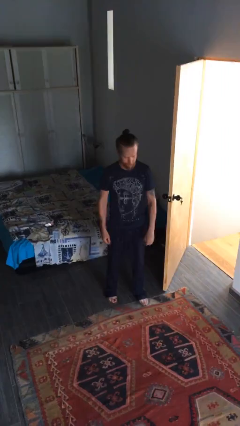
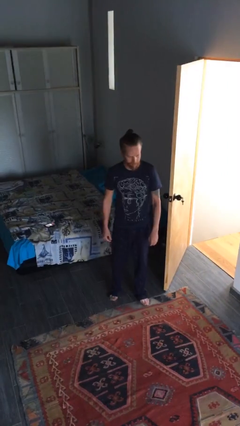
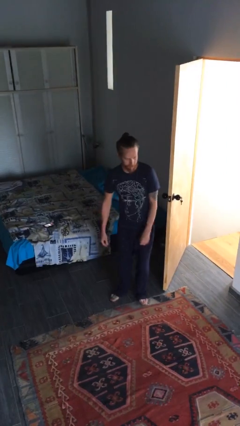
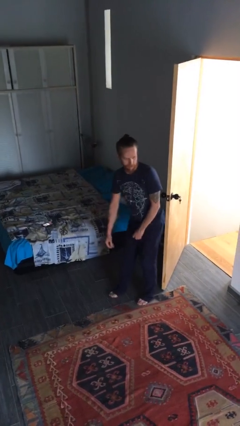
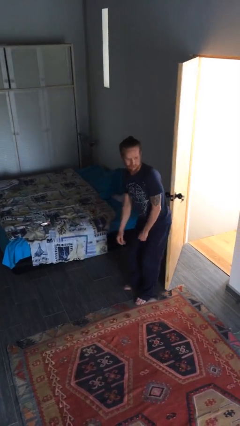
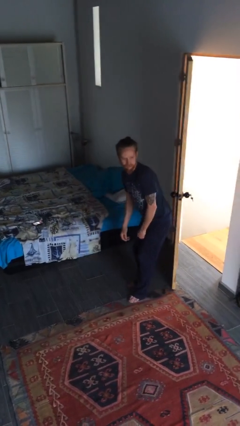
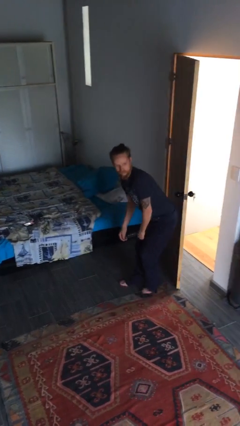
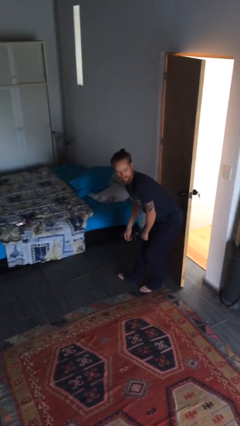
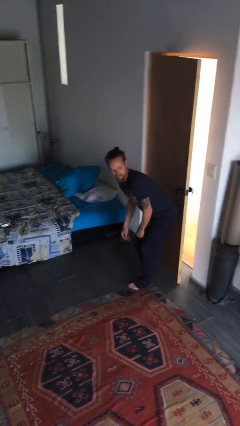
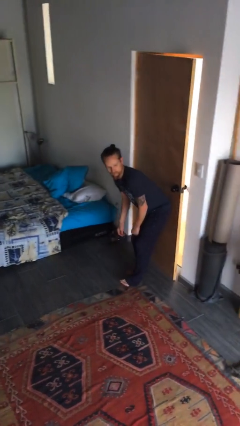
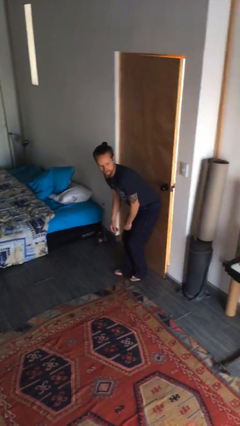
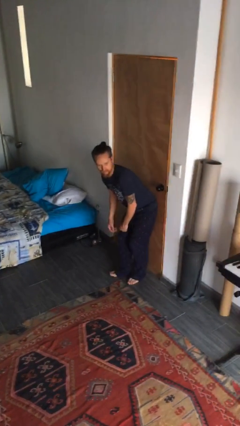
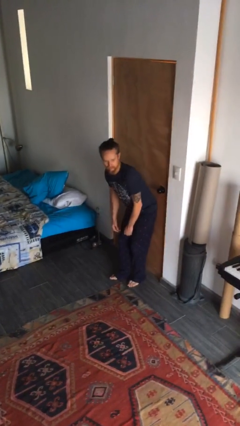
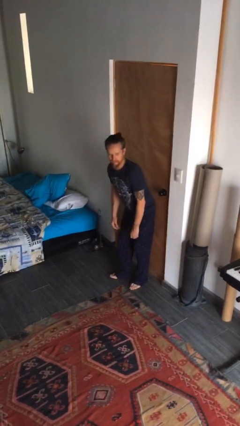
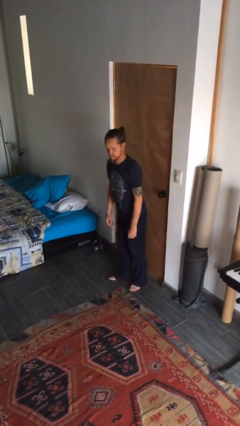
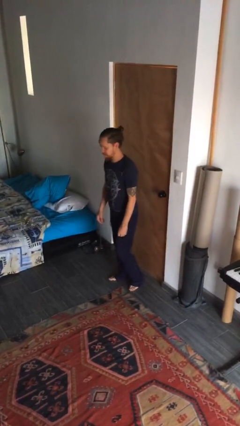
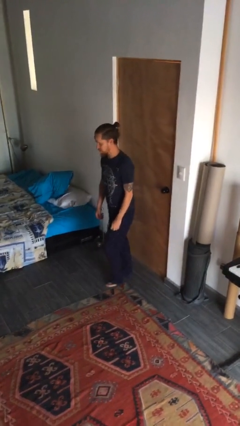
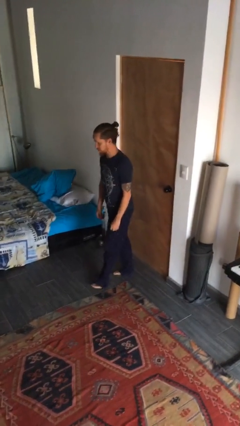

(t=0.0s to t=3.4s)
person closes door with hip

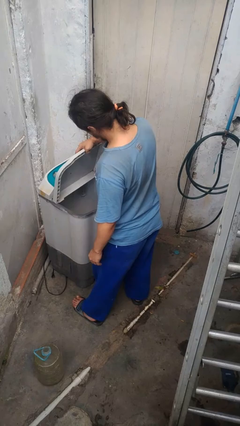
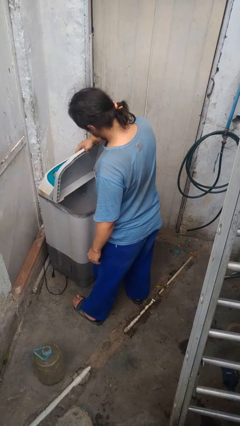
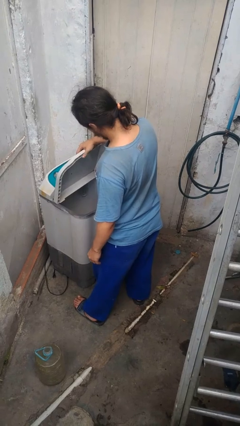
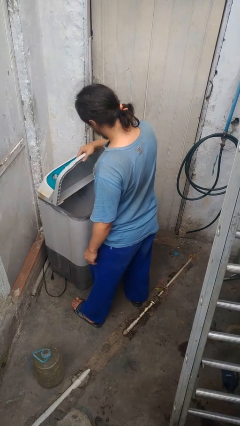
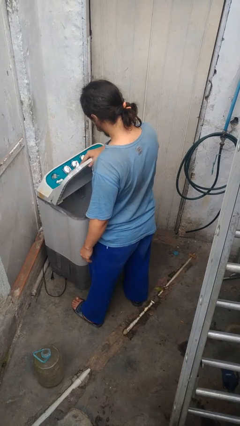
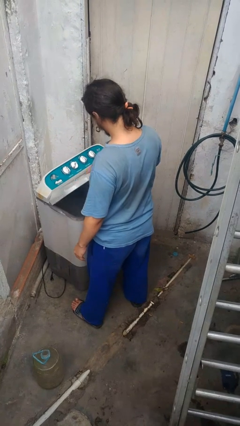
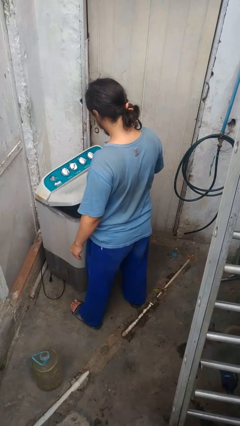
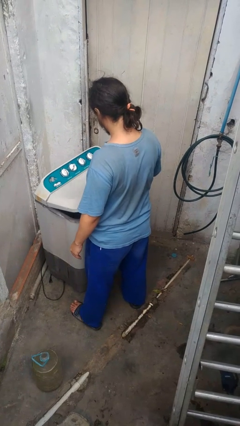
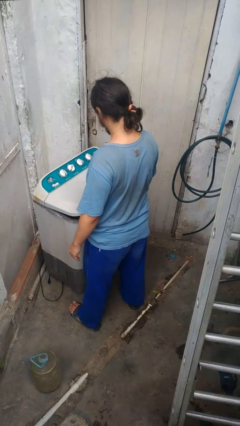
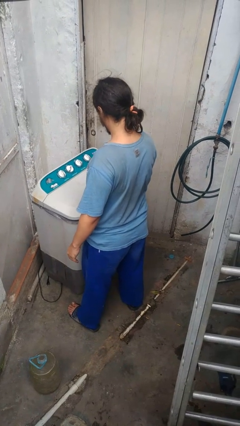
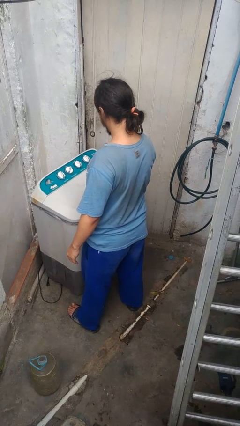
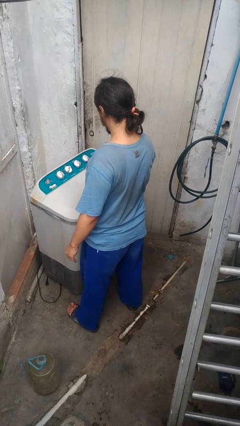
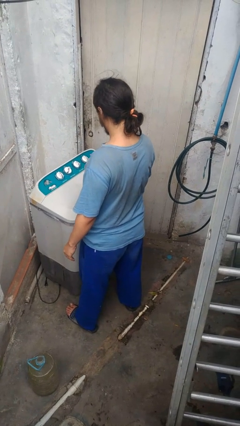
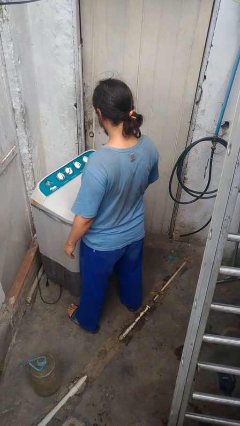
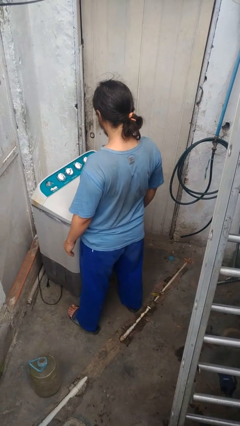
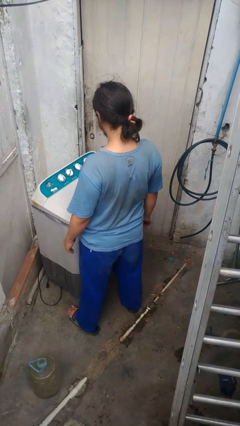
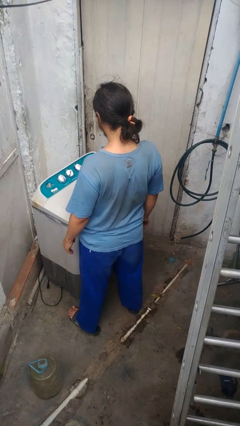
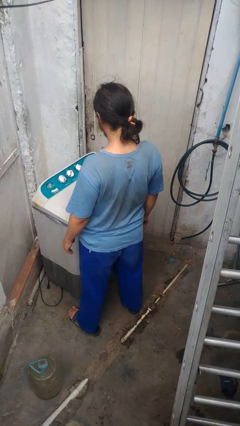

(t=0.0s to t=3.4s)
person closes clothes washer

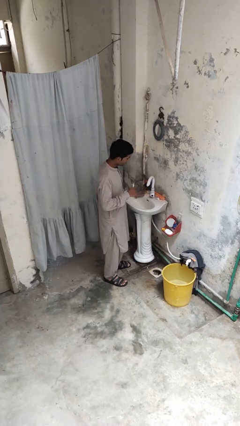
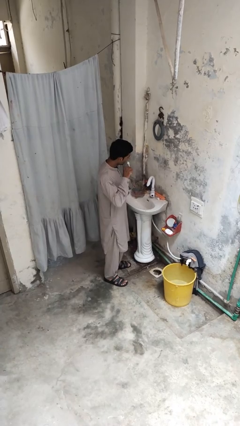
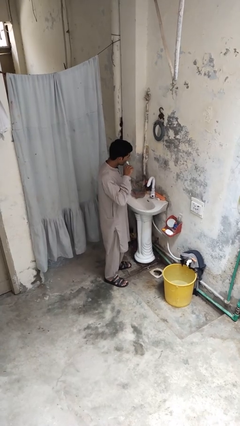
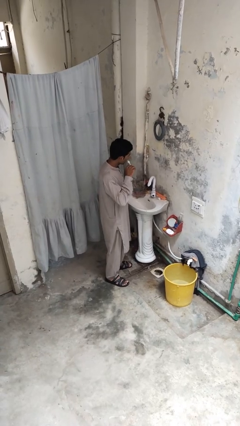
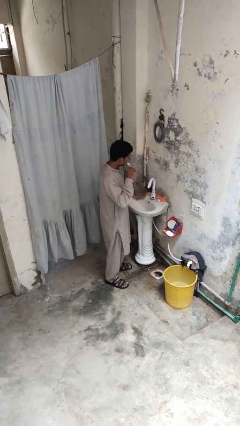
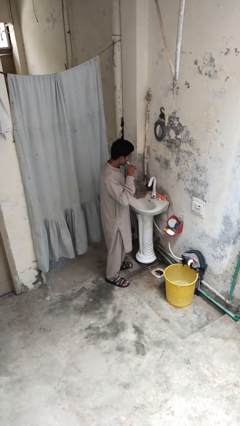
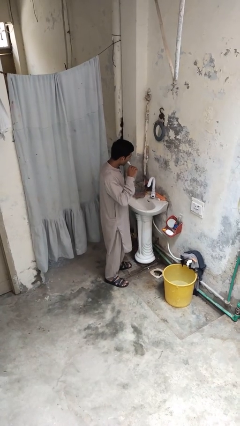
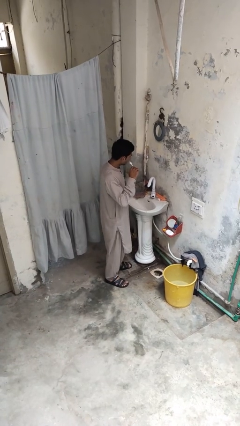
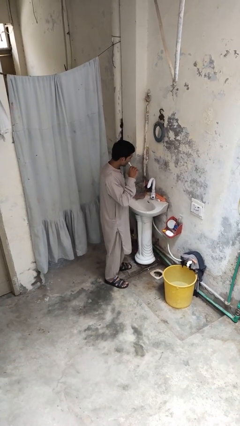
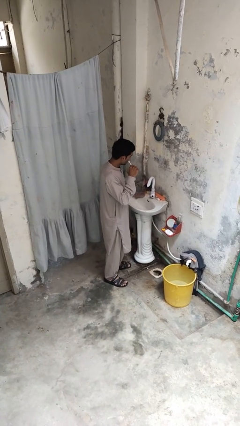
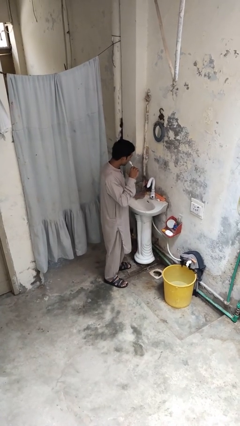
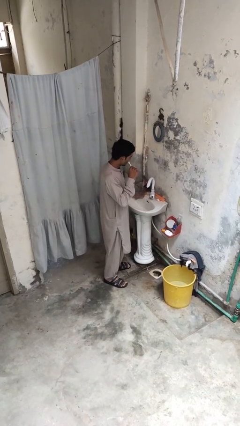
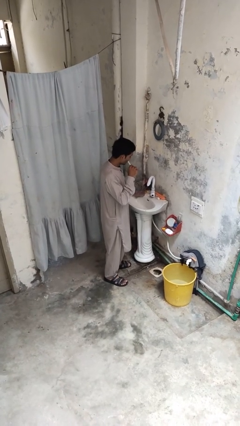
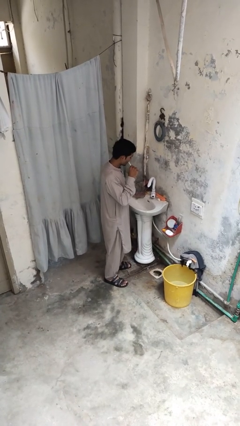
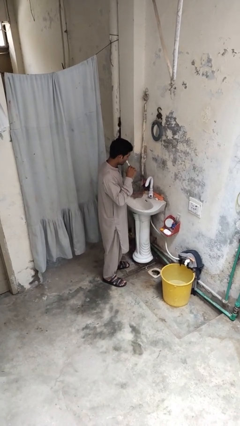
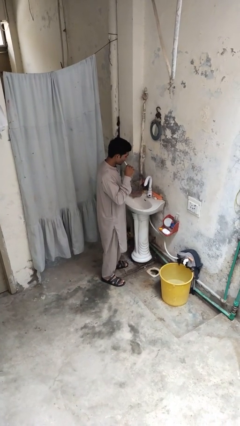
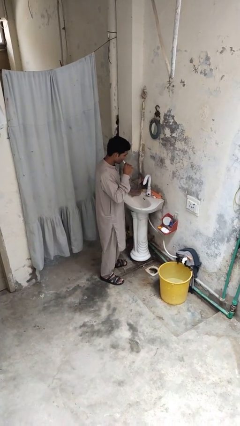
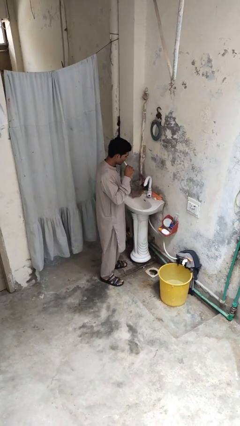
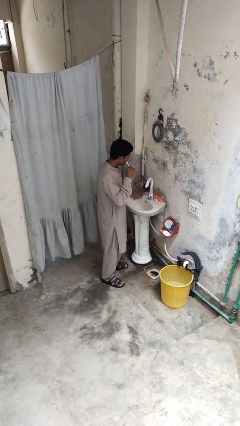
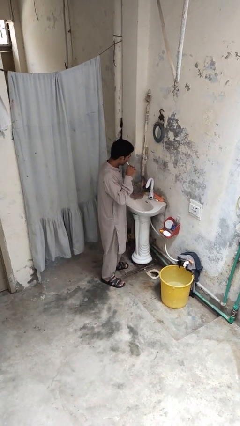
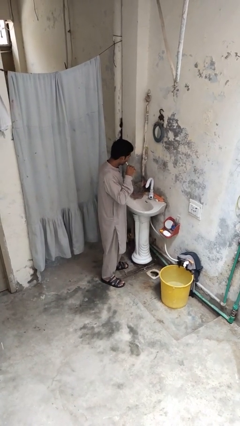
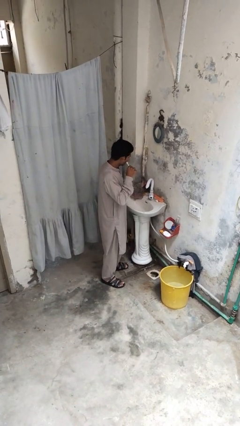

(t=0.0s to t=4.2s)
person brushes teeth

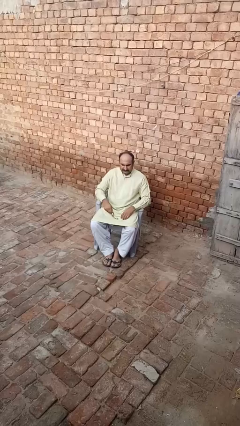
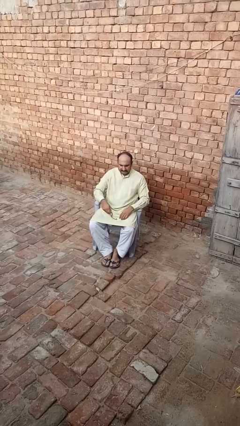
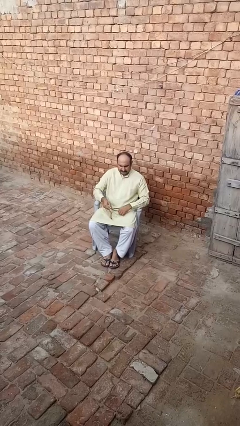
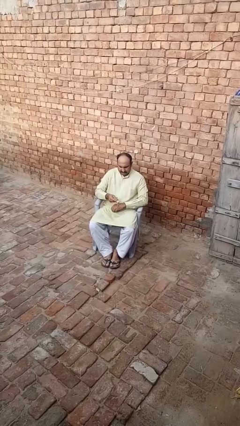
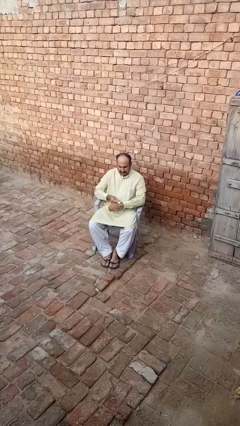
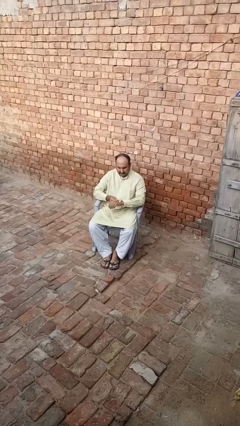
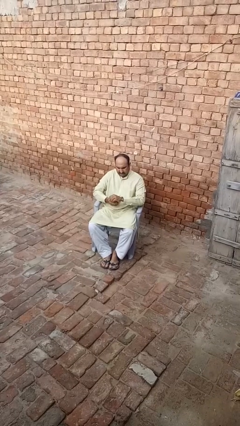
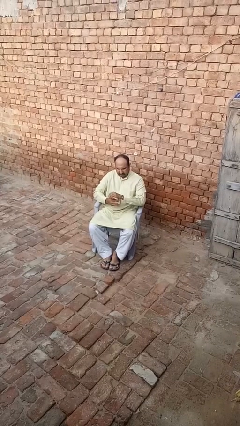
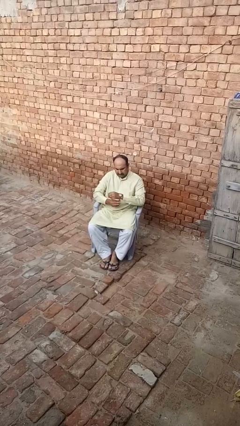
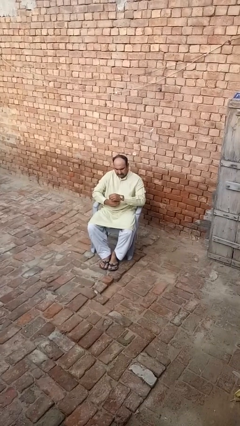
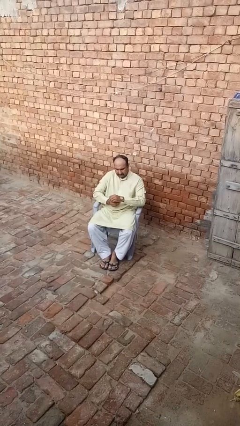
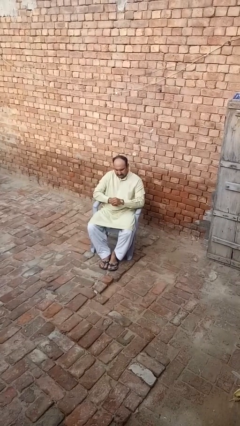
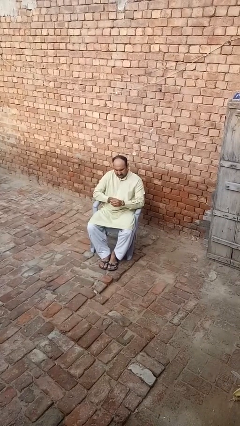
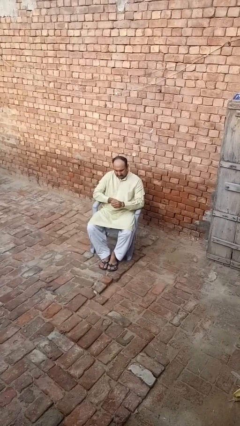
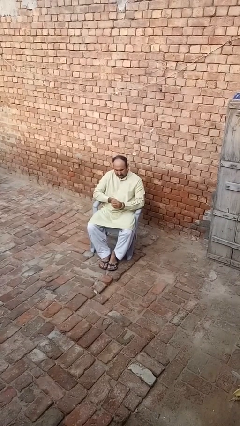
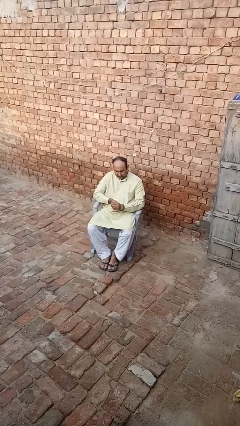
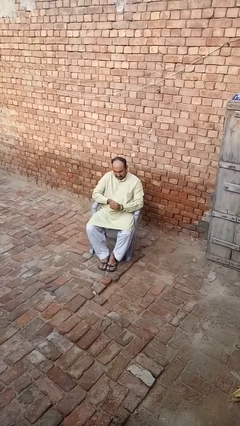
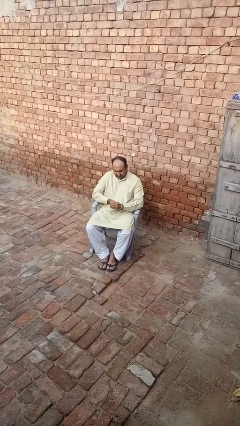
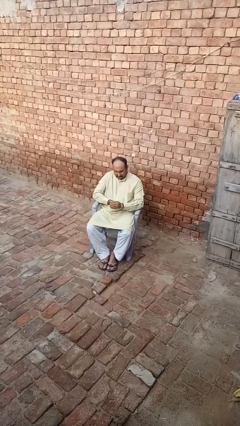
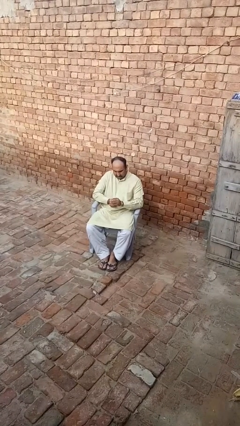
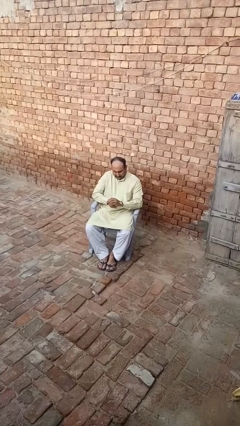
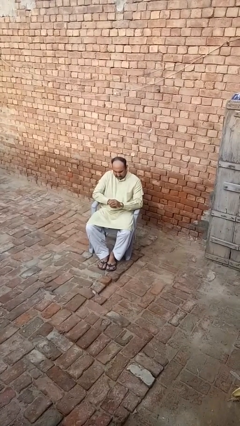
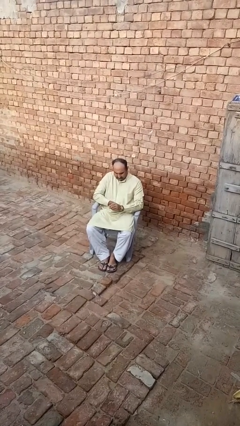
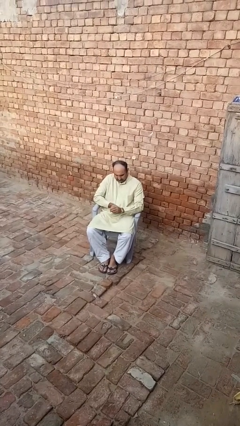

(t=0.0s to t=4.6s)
person puts on wristwatch

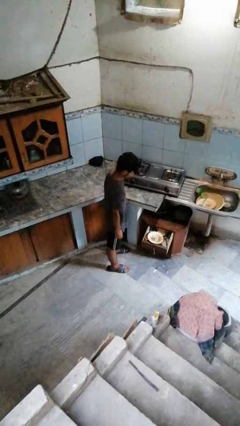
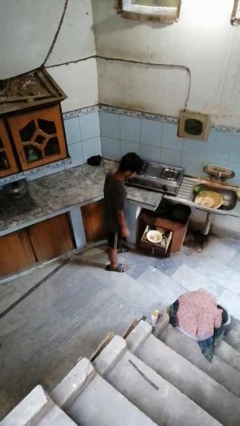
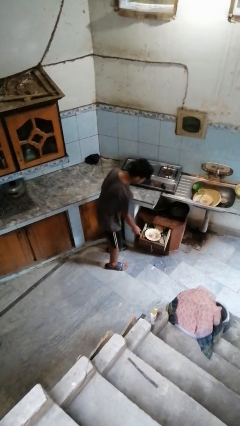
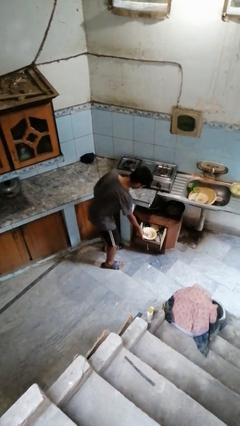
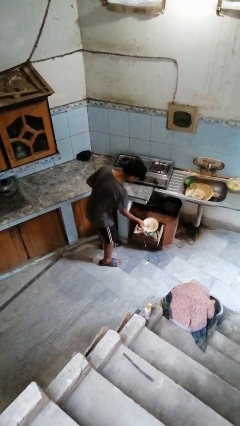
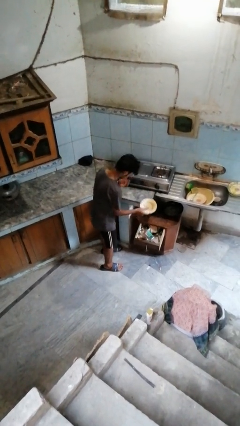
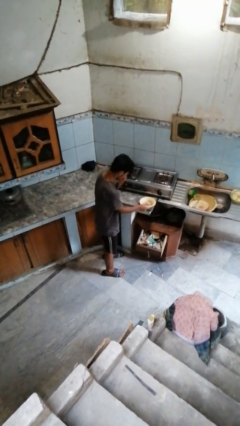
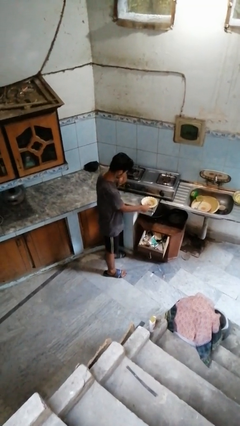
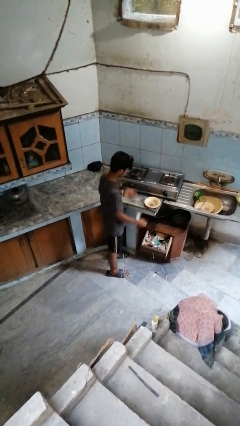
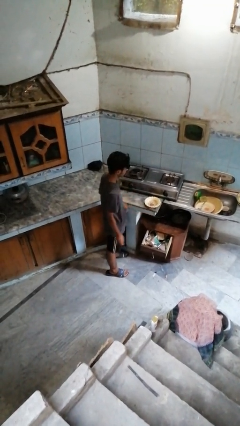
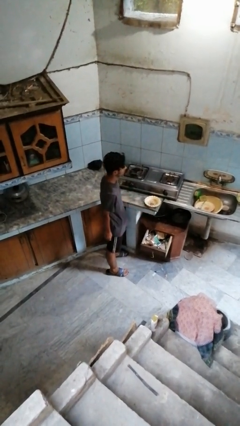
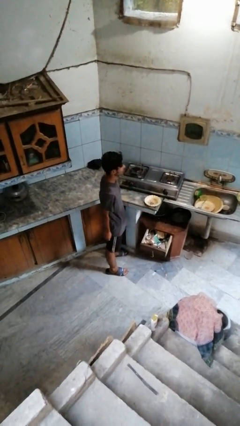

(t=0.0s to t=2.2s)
person takes object from kitchen drawer
